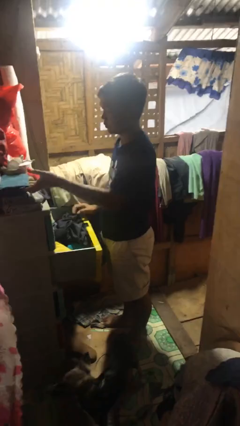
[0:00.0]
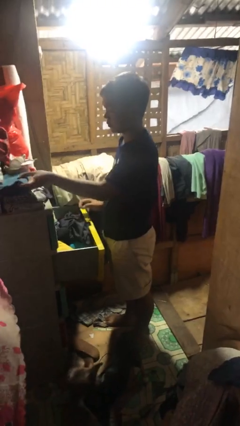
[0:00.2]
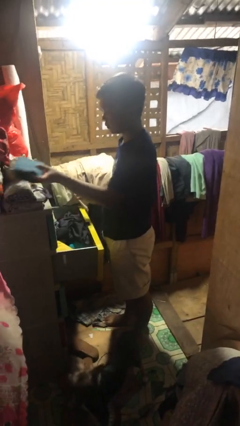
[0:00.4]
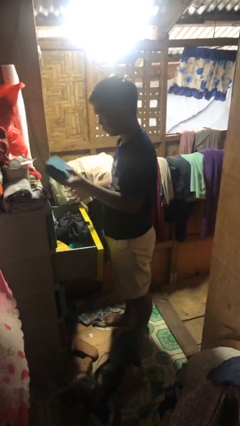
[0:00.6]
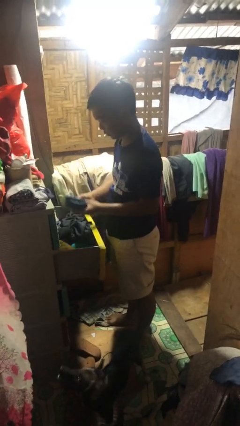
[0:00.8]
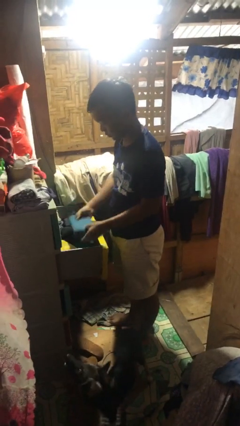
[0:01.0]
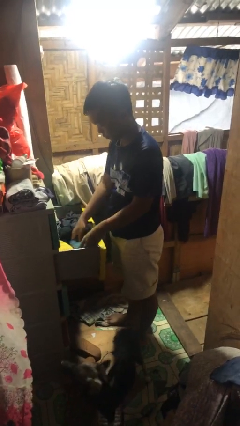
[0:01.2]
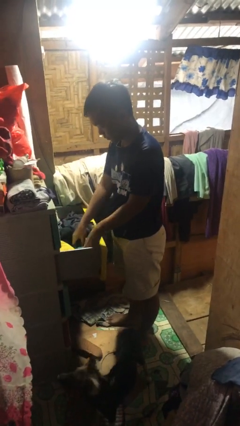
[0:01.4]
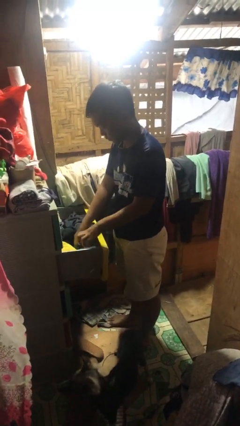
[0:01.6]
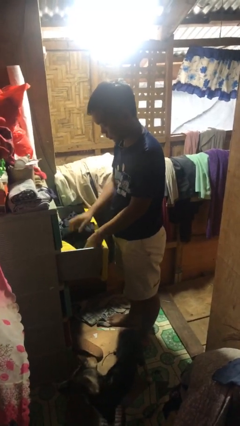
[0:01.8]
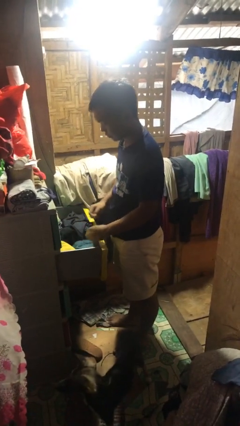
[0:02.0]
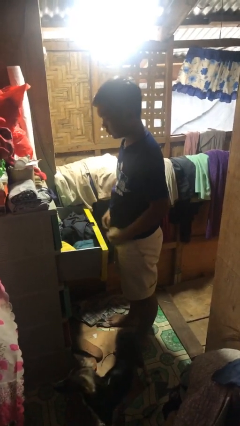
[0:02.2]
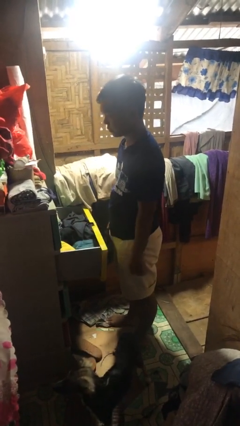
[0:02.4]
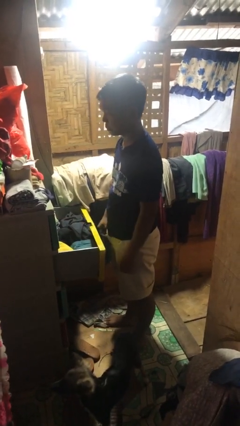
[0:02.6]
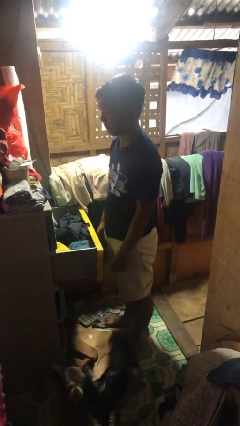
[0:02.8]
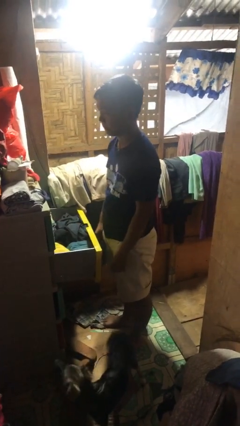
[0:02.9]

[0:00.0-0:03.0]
person puts clothes into dresser

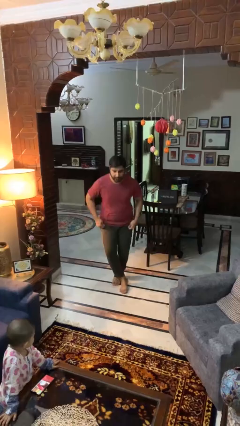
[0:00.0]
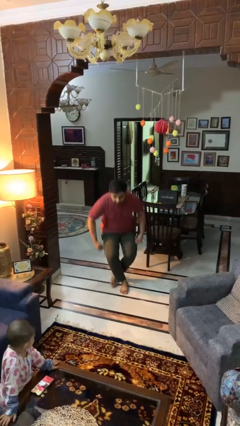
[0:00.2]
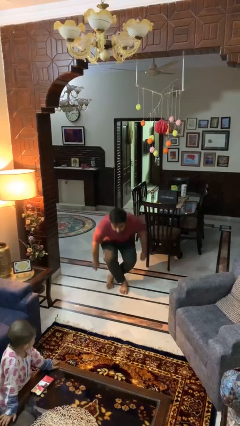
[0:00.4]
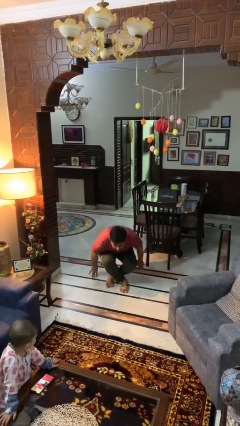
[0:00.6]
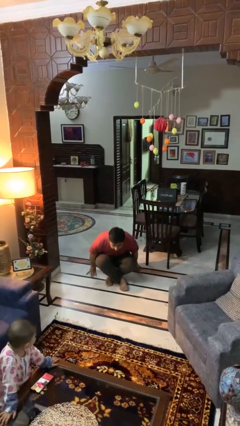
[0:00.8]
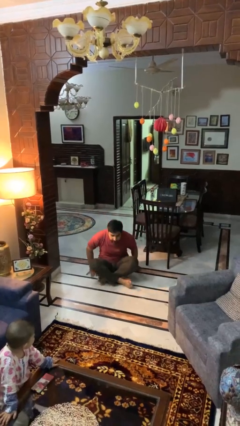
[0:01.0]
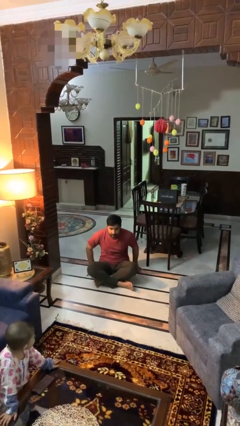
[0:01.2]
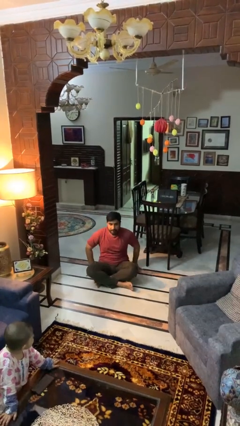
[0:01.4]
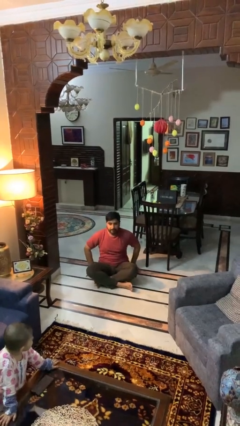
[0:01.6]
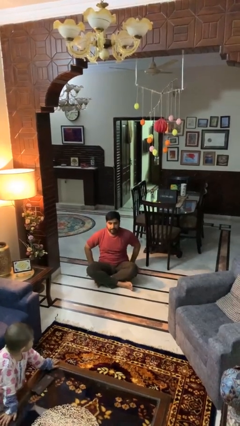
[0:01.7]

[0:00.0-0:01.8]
person sits crisscross

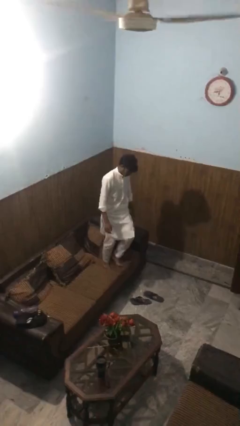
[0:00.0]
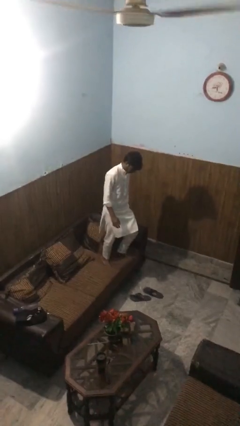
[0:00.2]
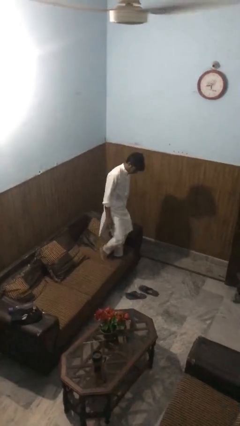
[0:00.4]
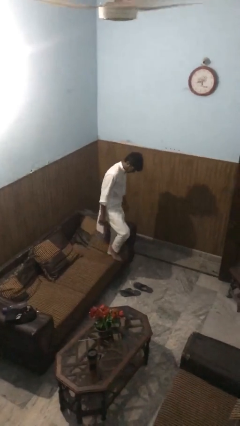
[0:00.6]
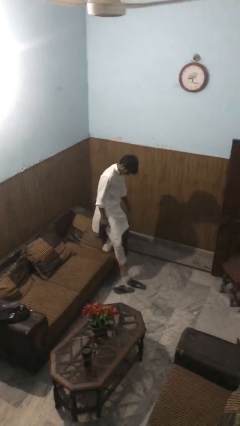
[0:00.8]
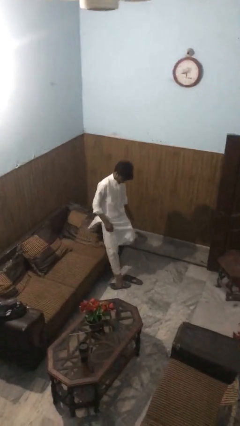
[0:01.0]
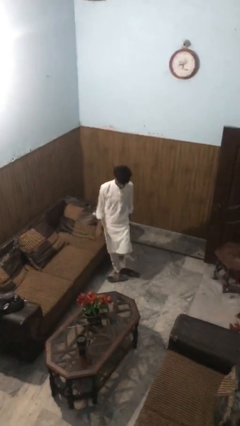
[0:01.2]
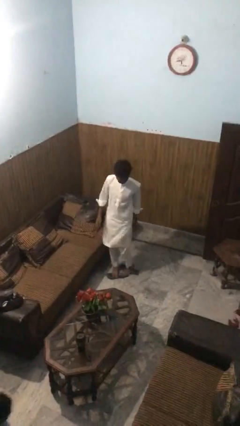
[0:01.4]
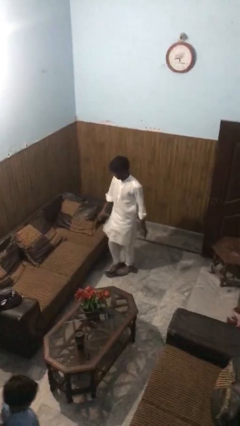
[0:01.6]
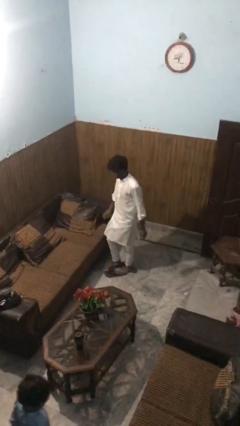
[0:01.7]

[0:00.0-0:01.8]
person climbs off couch

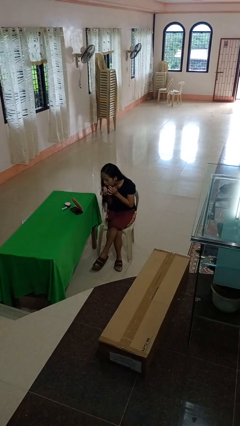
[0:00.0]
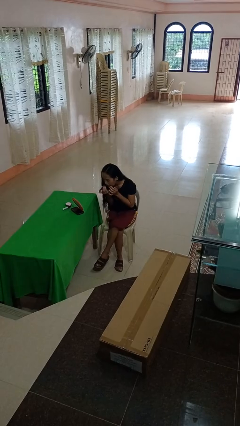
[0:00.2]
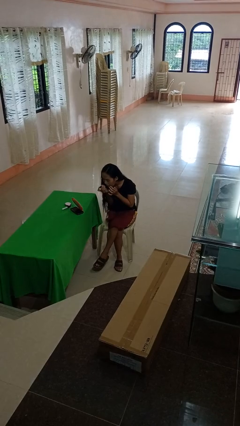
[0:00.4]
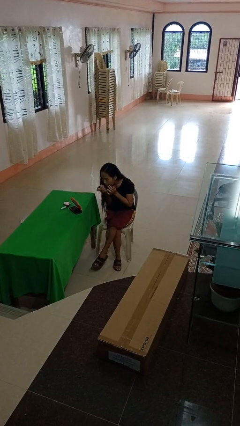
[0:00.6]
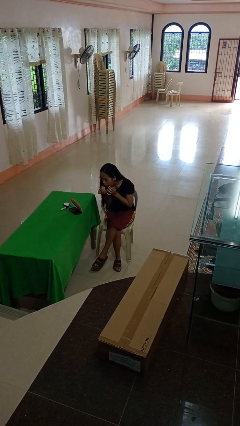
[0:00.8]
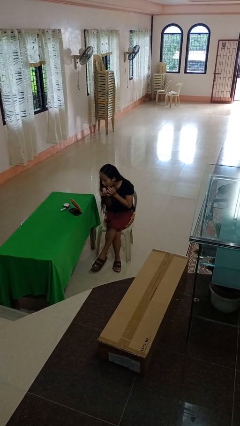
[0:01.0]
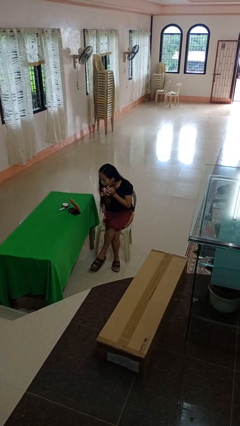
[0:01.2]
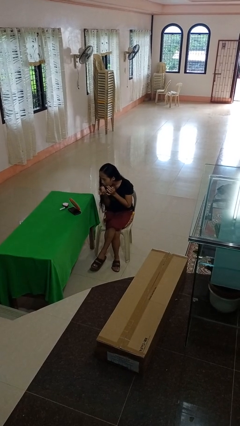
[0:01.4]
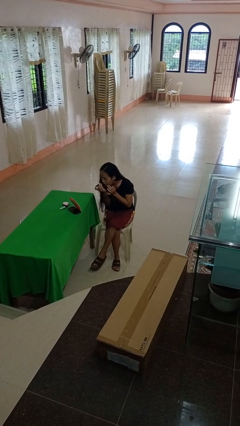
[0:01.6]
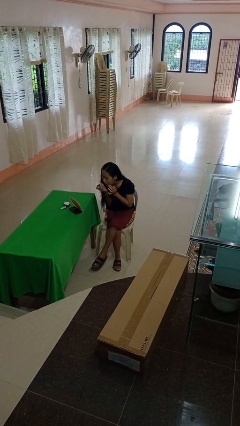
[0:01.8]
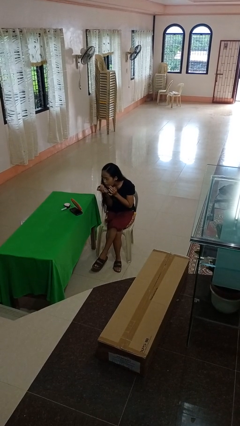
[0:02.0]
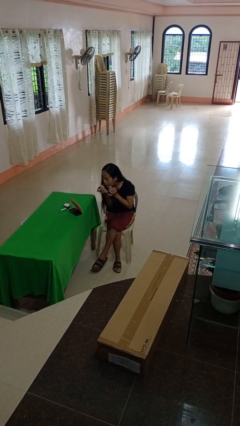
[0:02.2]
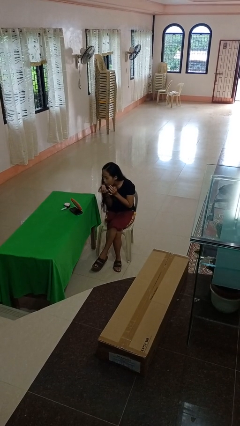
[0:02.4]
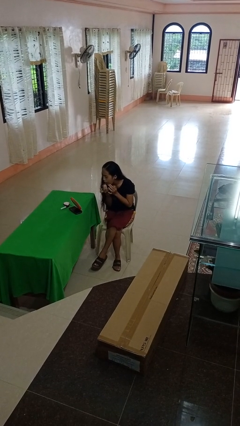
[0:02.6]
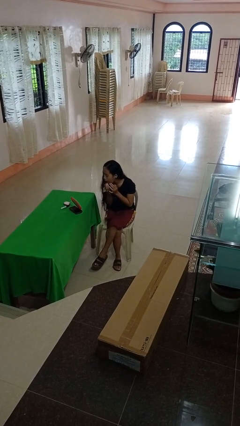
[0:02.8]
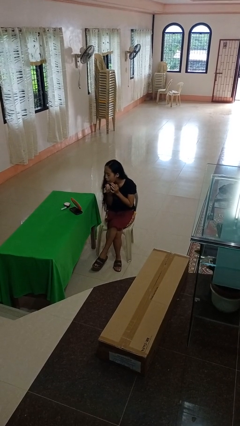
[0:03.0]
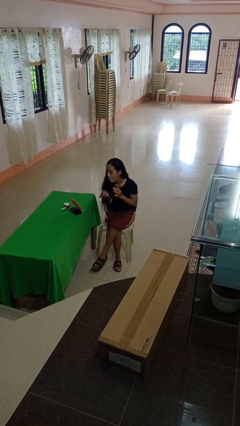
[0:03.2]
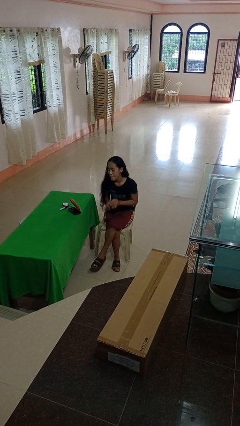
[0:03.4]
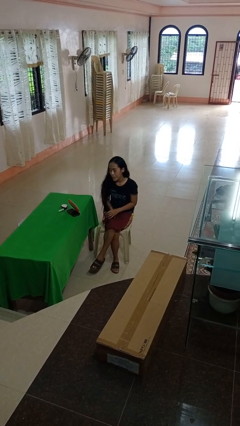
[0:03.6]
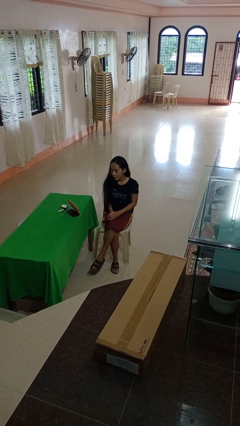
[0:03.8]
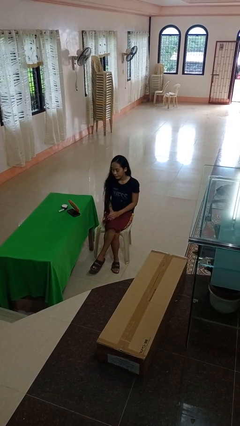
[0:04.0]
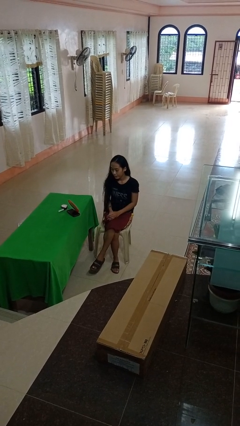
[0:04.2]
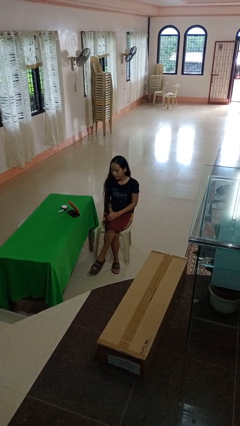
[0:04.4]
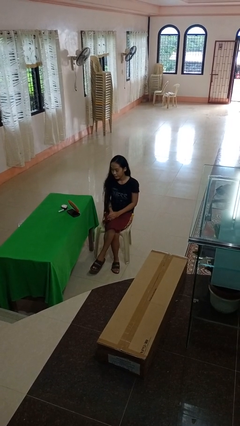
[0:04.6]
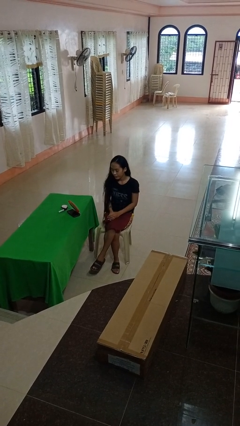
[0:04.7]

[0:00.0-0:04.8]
person applies lip makeup

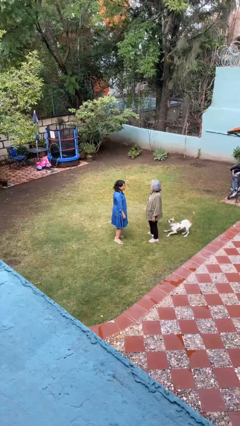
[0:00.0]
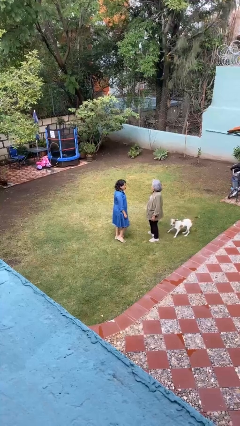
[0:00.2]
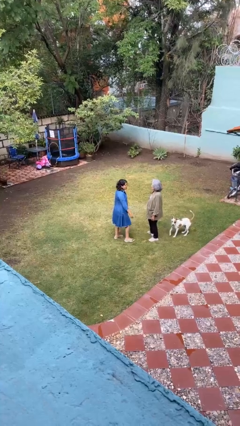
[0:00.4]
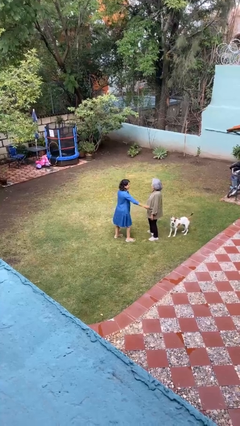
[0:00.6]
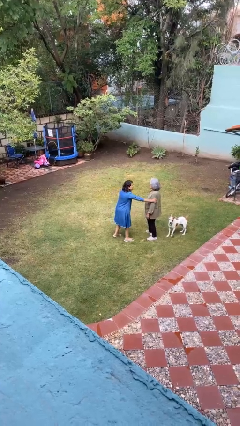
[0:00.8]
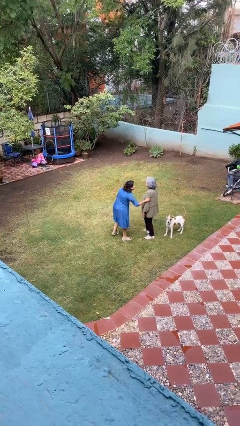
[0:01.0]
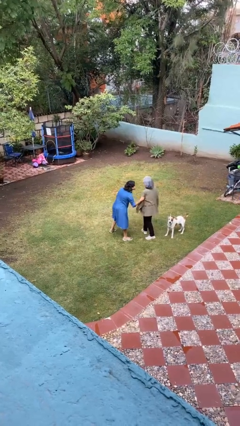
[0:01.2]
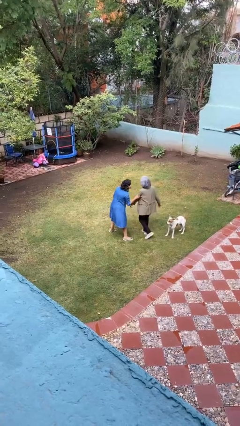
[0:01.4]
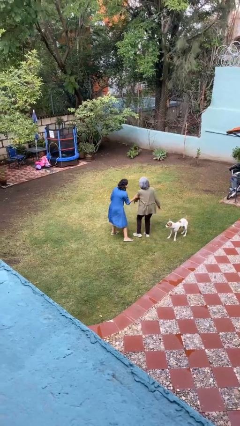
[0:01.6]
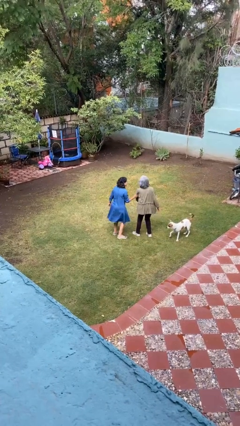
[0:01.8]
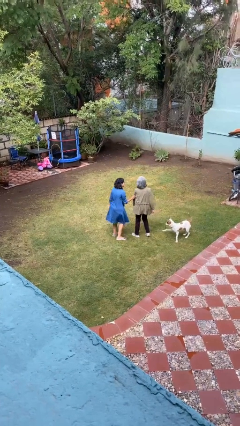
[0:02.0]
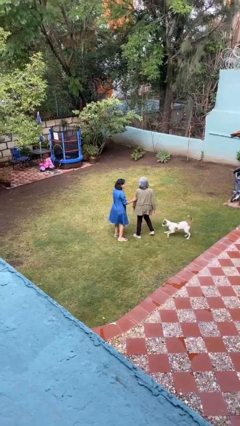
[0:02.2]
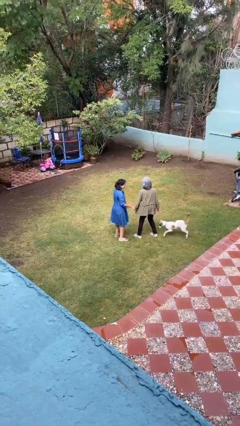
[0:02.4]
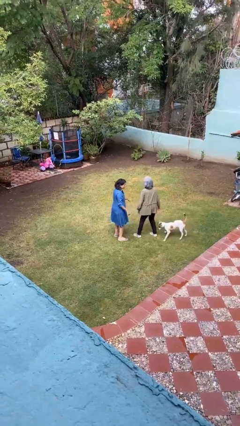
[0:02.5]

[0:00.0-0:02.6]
person grabs person by bicep

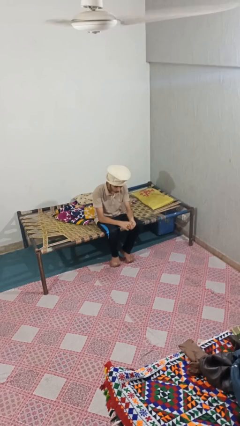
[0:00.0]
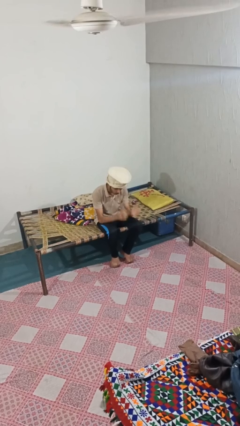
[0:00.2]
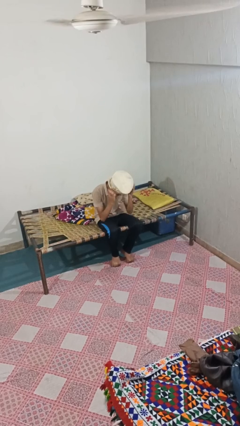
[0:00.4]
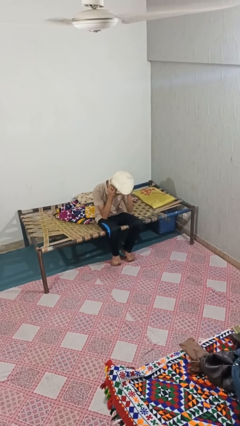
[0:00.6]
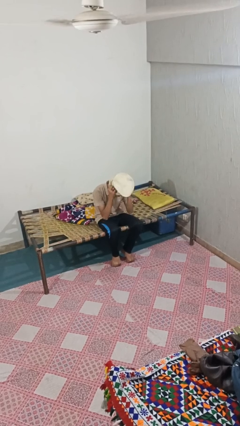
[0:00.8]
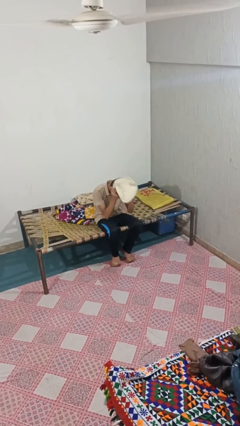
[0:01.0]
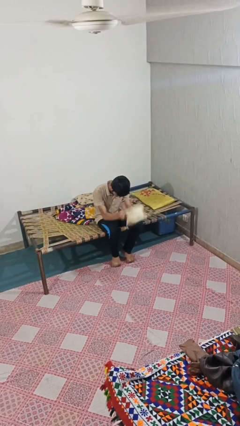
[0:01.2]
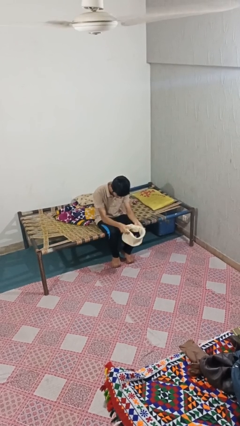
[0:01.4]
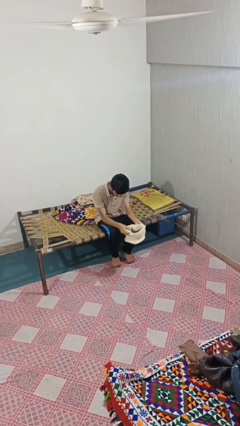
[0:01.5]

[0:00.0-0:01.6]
person takes off hat

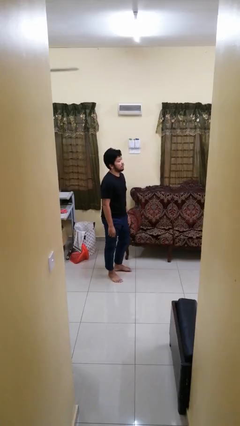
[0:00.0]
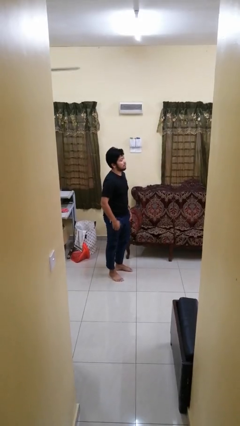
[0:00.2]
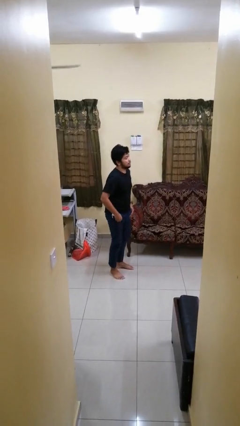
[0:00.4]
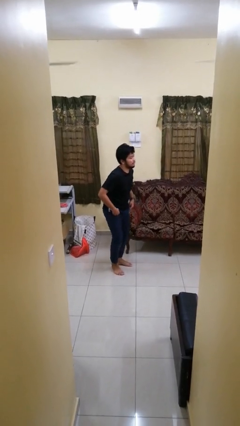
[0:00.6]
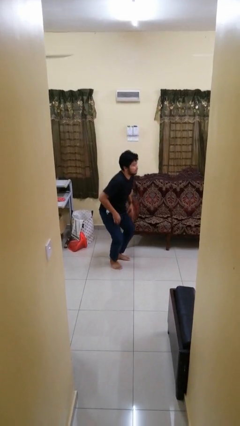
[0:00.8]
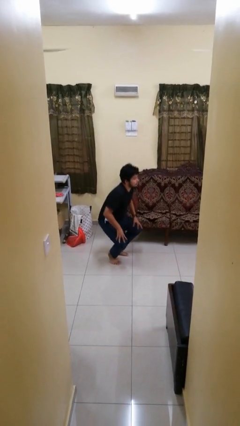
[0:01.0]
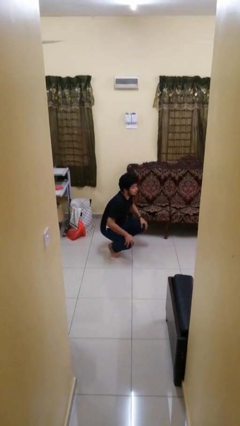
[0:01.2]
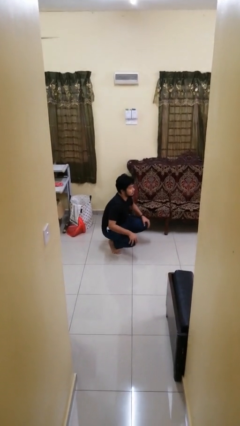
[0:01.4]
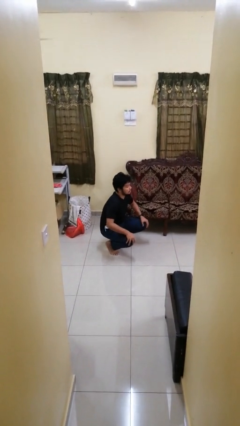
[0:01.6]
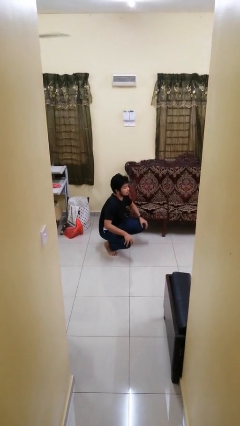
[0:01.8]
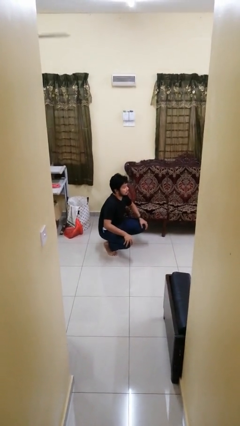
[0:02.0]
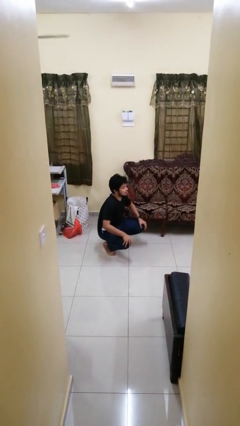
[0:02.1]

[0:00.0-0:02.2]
person squats
